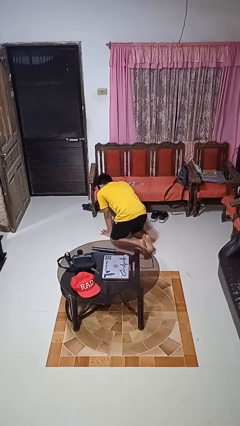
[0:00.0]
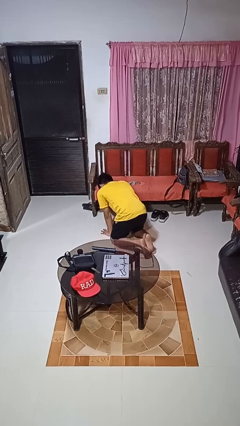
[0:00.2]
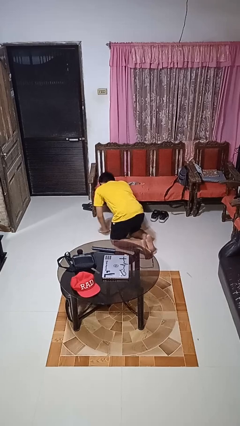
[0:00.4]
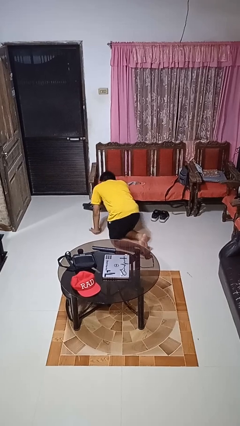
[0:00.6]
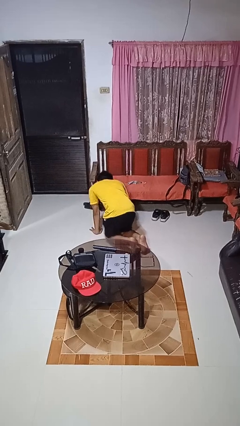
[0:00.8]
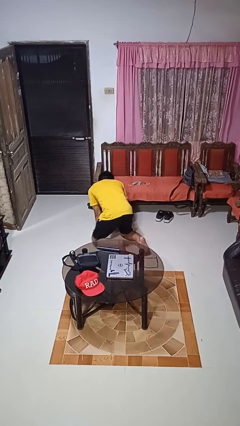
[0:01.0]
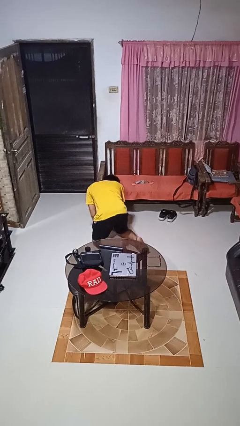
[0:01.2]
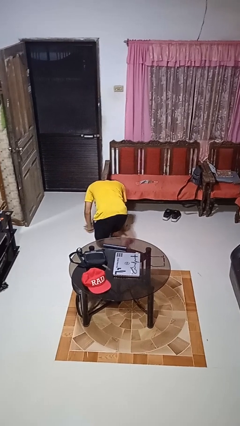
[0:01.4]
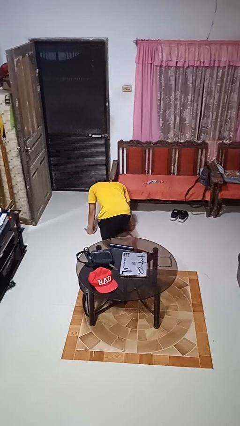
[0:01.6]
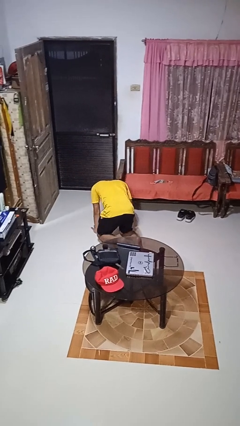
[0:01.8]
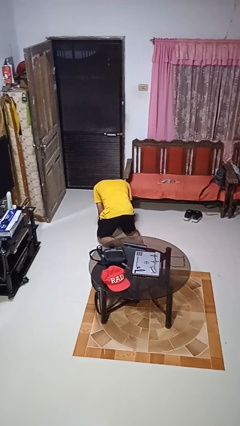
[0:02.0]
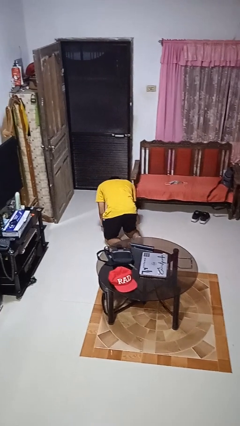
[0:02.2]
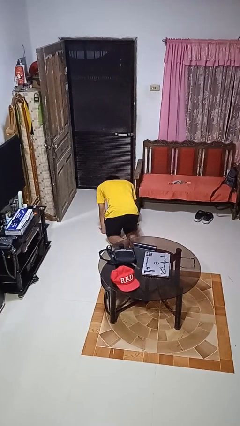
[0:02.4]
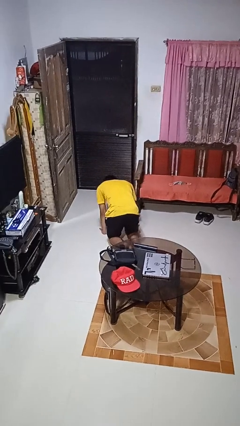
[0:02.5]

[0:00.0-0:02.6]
person crawls

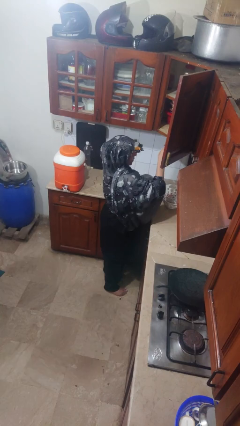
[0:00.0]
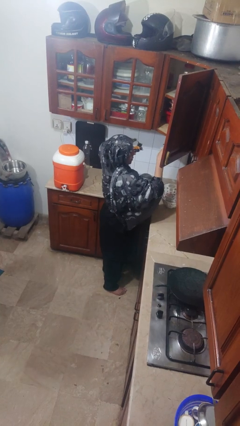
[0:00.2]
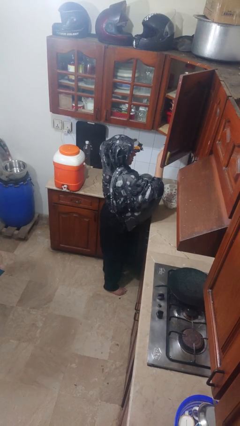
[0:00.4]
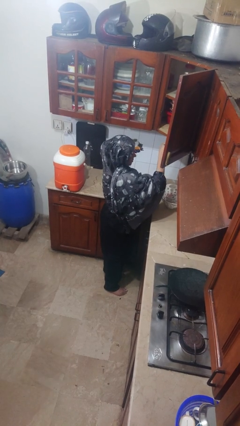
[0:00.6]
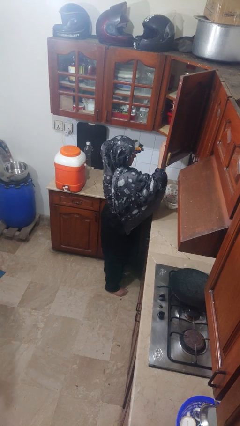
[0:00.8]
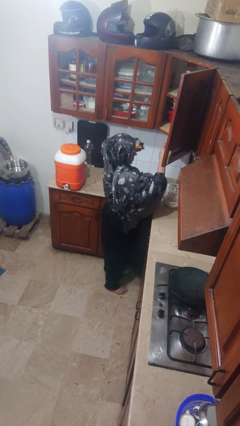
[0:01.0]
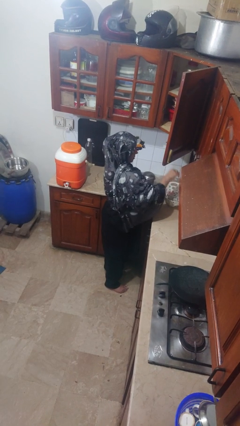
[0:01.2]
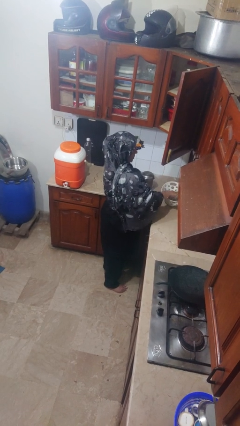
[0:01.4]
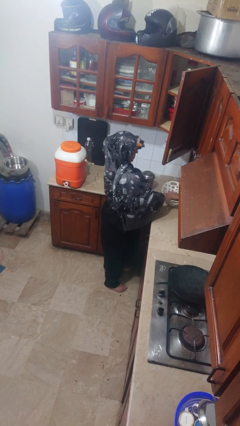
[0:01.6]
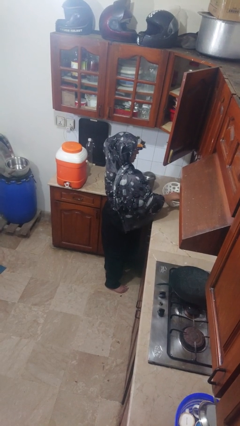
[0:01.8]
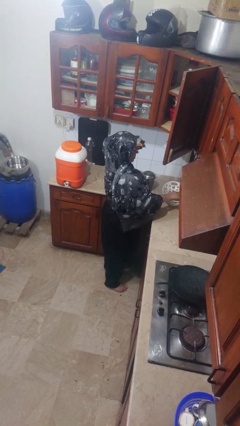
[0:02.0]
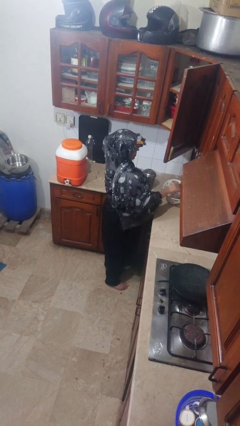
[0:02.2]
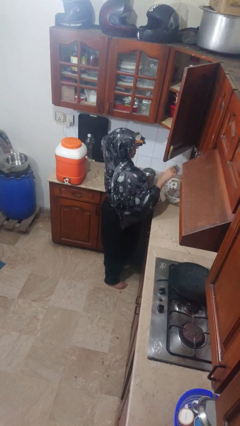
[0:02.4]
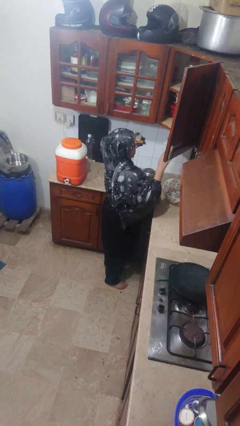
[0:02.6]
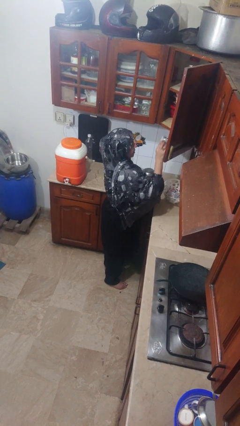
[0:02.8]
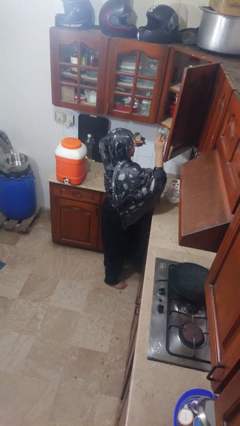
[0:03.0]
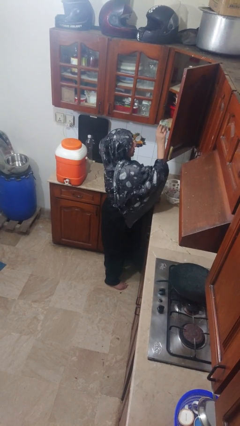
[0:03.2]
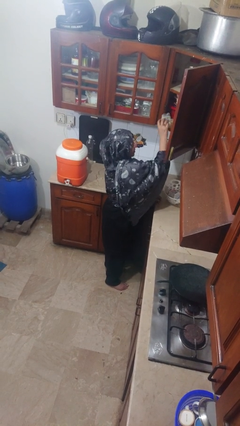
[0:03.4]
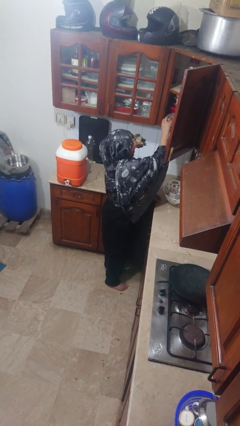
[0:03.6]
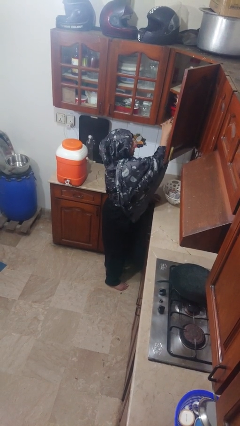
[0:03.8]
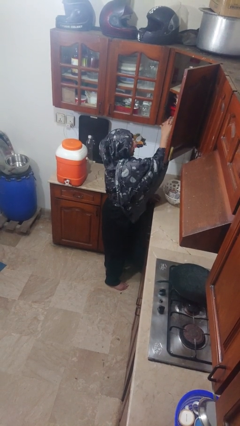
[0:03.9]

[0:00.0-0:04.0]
person loads groceries into cabinet

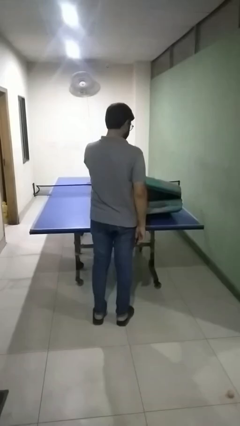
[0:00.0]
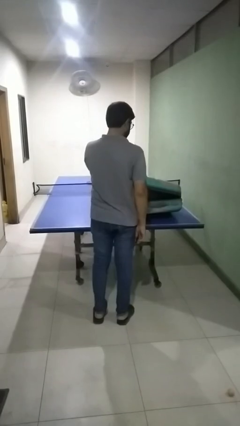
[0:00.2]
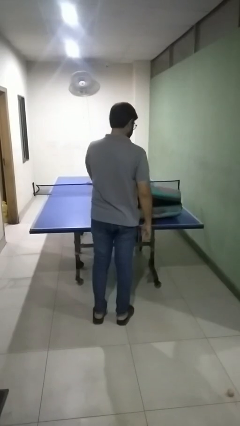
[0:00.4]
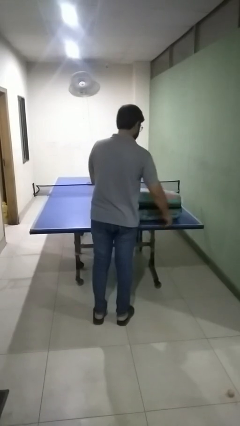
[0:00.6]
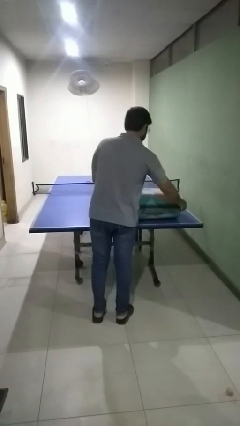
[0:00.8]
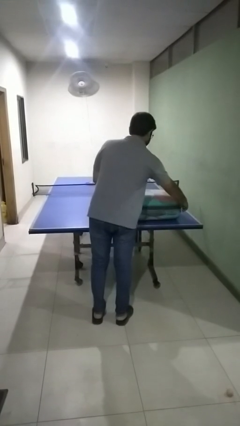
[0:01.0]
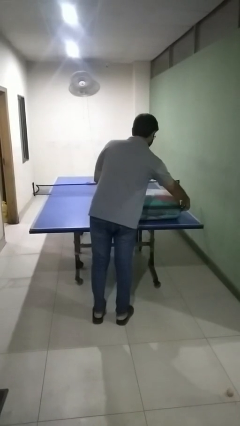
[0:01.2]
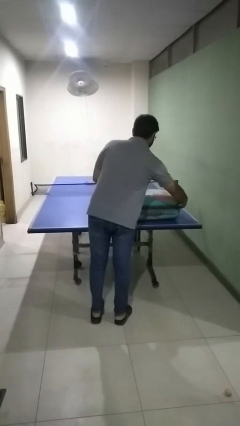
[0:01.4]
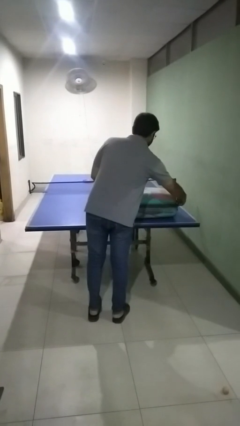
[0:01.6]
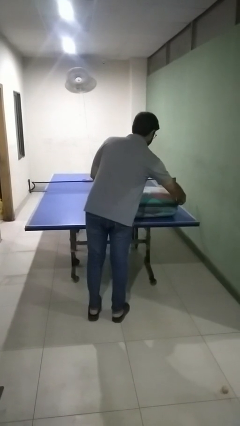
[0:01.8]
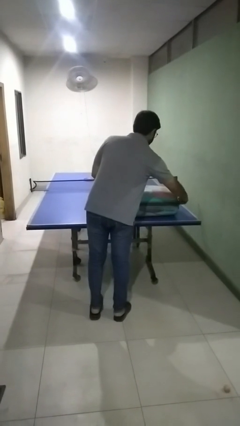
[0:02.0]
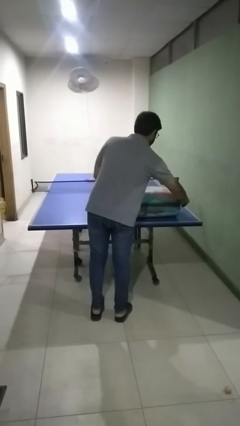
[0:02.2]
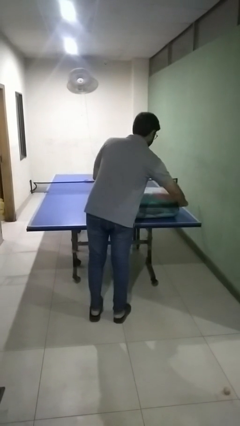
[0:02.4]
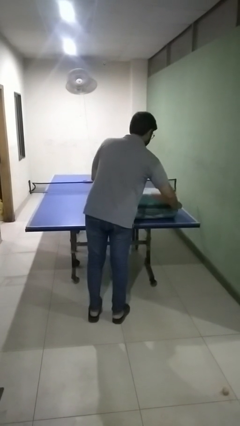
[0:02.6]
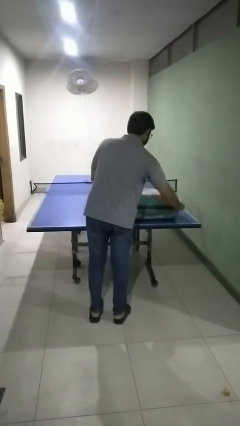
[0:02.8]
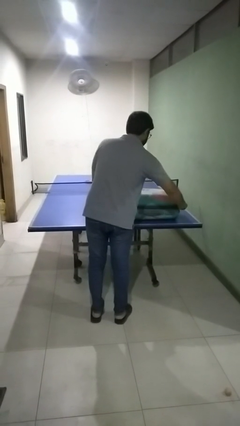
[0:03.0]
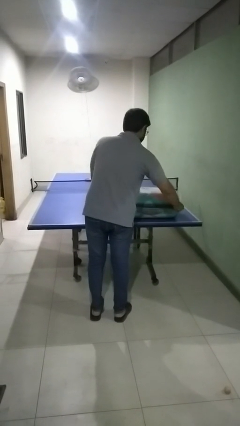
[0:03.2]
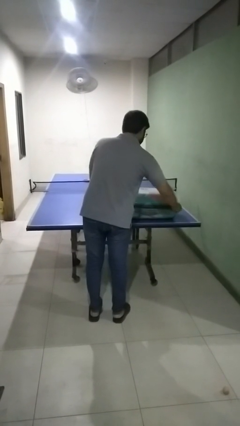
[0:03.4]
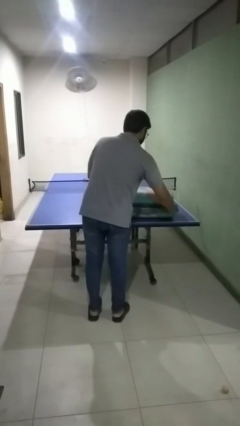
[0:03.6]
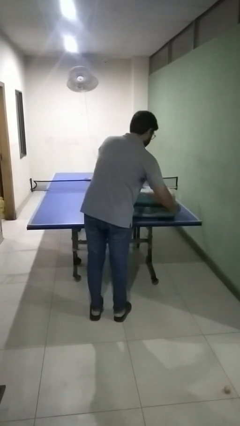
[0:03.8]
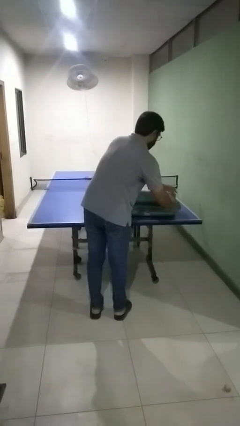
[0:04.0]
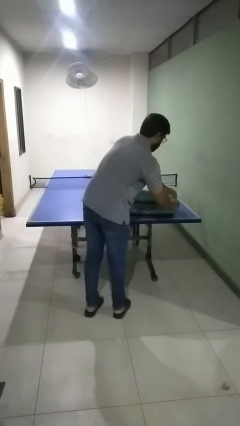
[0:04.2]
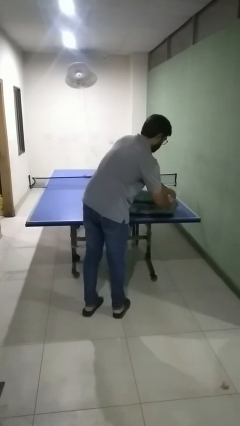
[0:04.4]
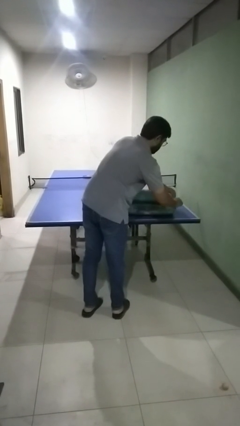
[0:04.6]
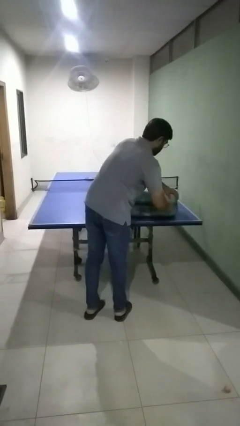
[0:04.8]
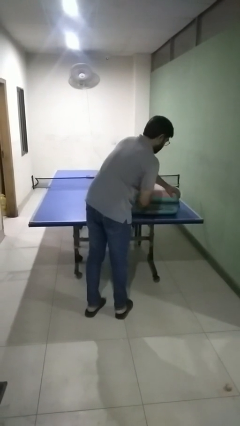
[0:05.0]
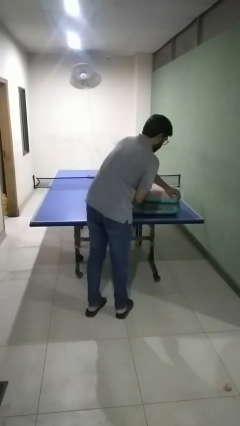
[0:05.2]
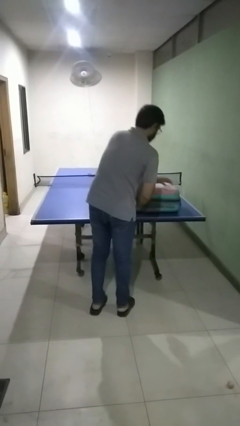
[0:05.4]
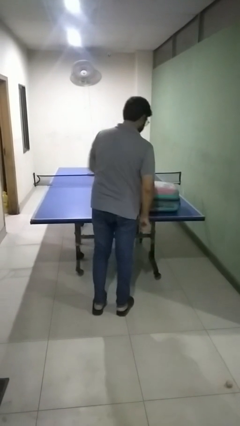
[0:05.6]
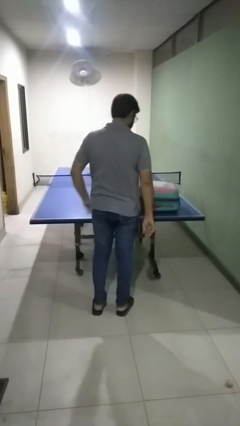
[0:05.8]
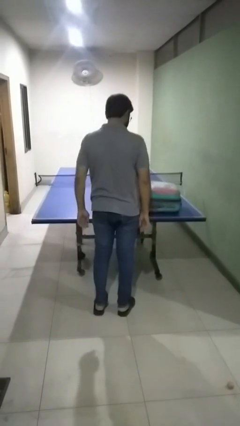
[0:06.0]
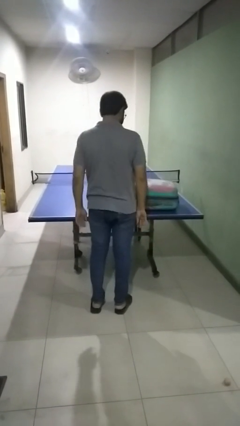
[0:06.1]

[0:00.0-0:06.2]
person closes suitcase

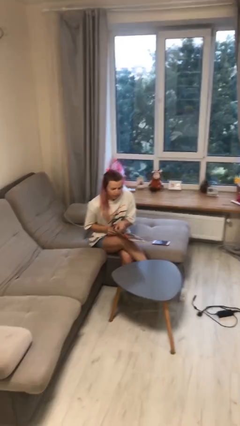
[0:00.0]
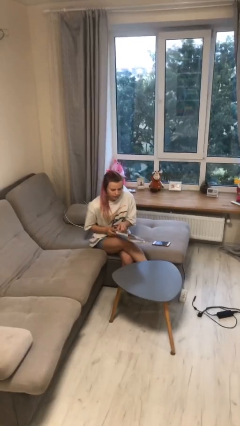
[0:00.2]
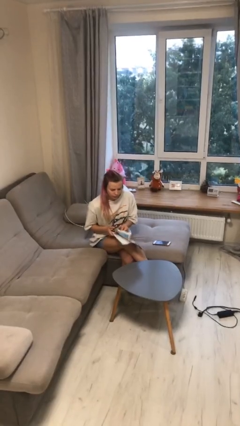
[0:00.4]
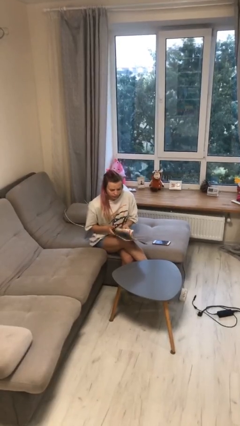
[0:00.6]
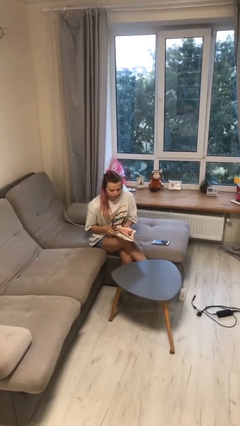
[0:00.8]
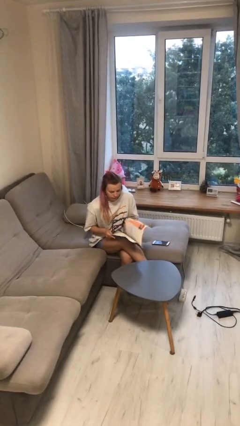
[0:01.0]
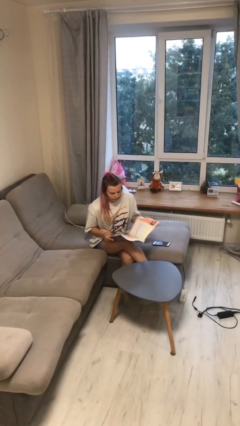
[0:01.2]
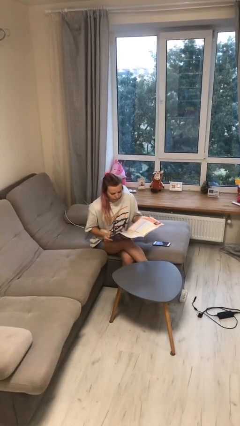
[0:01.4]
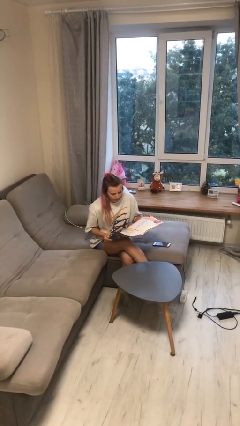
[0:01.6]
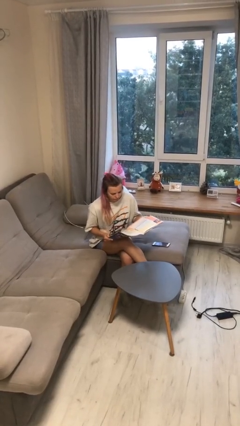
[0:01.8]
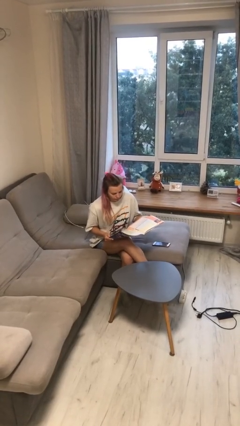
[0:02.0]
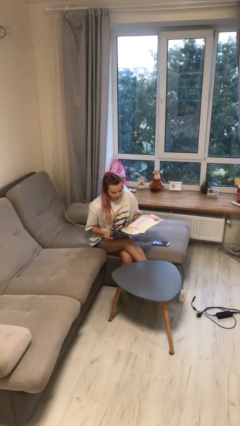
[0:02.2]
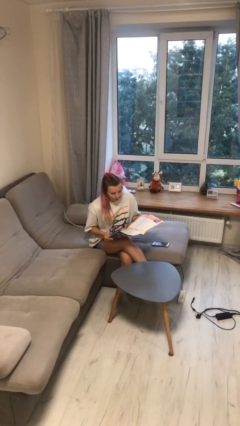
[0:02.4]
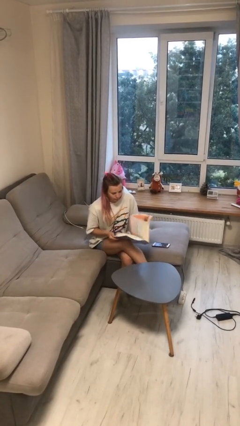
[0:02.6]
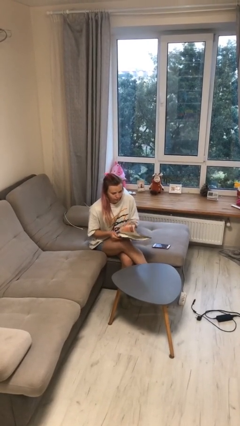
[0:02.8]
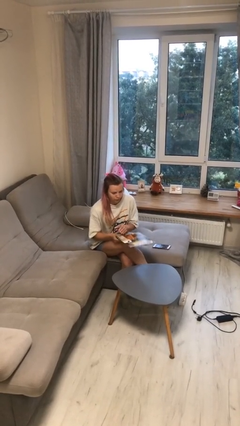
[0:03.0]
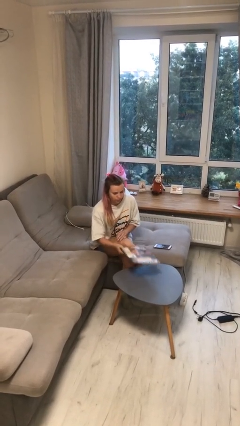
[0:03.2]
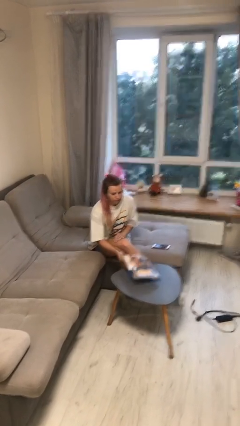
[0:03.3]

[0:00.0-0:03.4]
person reads magazine

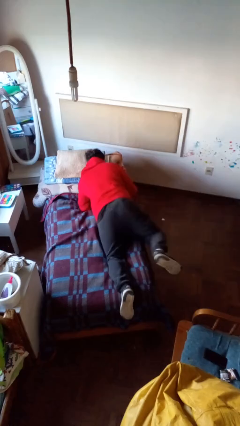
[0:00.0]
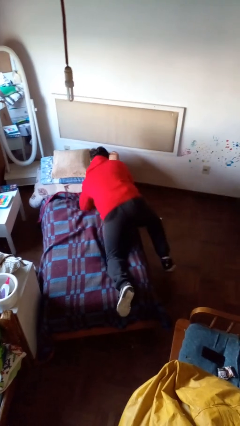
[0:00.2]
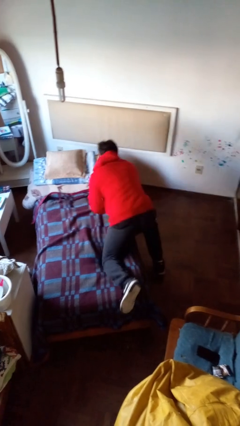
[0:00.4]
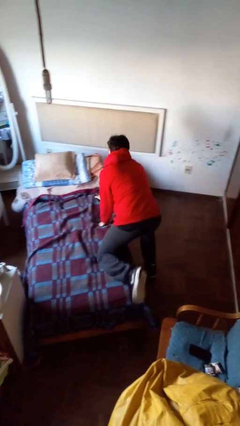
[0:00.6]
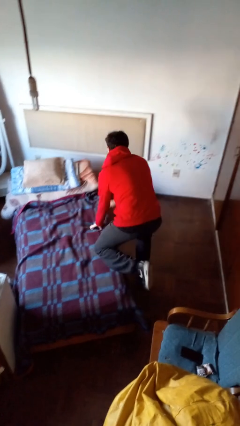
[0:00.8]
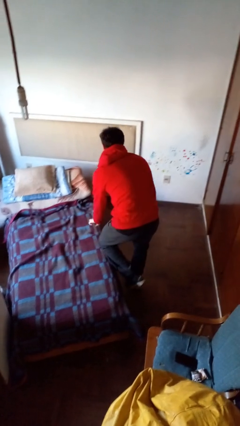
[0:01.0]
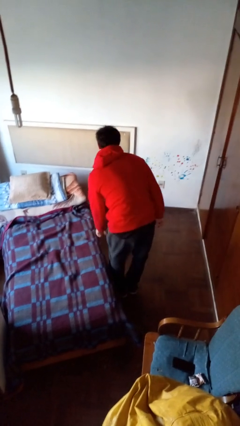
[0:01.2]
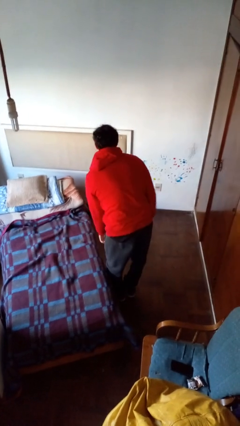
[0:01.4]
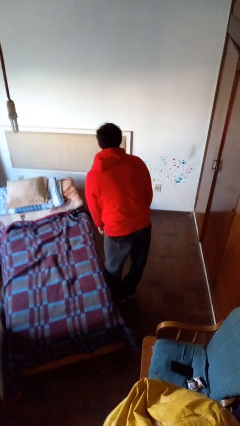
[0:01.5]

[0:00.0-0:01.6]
person stands up
